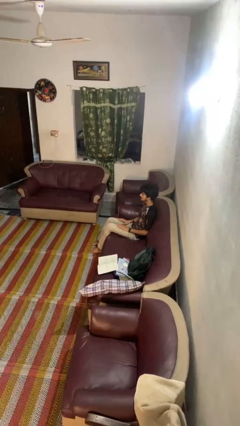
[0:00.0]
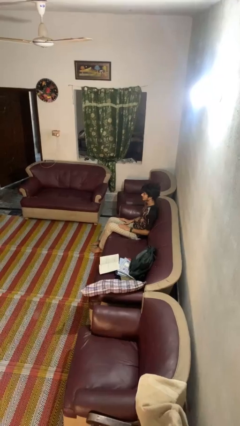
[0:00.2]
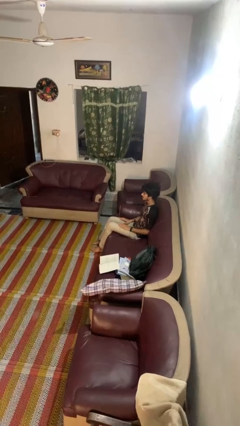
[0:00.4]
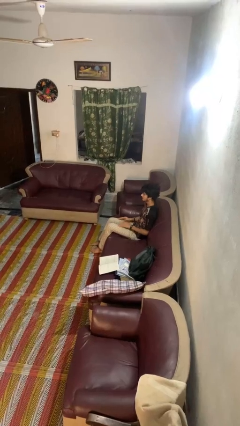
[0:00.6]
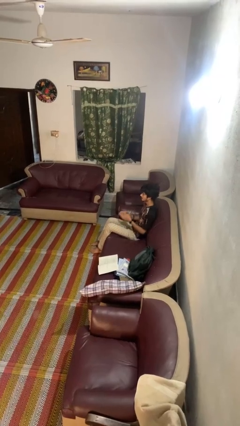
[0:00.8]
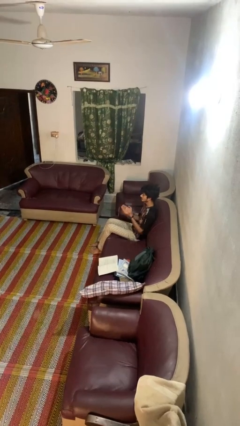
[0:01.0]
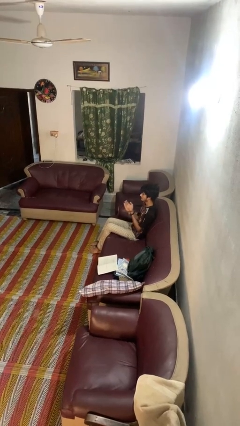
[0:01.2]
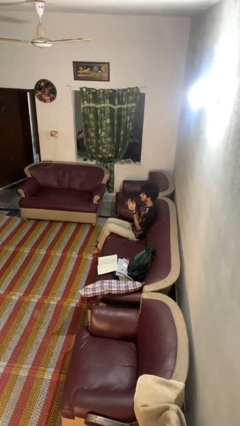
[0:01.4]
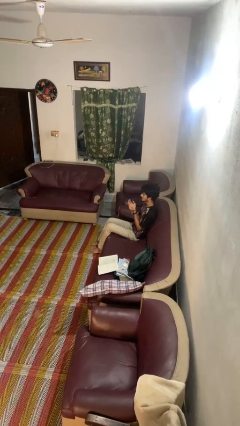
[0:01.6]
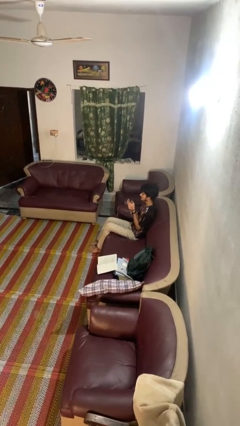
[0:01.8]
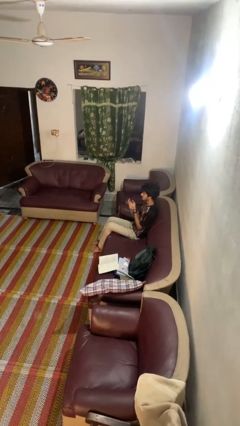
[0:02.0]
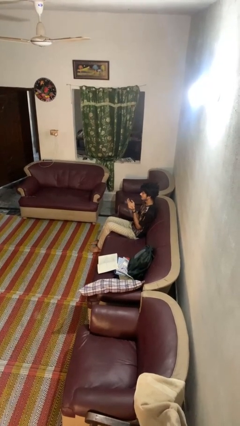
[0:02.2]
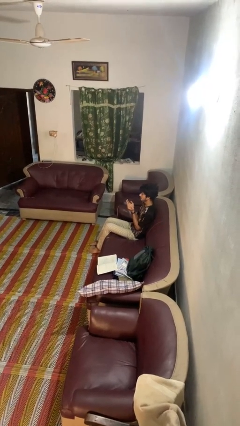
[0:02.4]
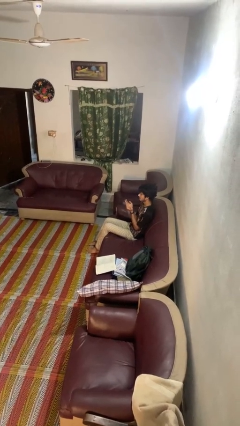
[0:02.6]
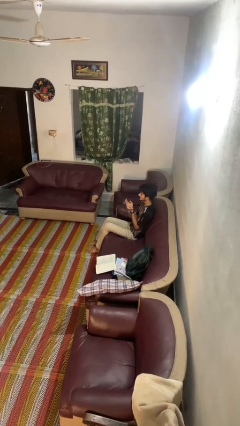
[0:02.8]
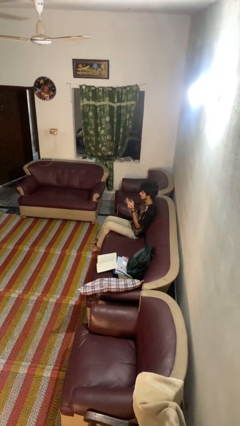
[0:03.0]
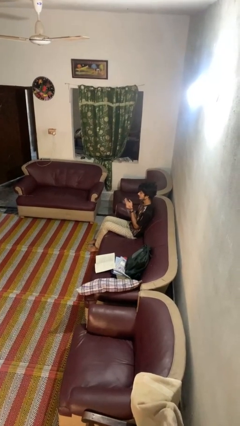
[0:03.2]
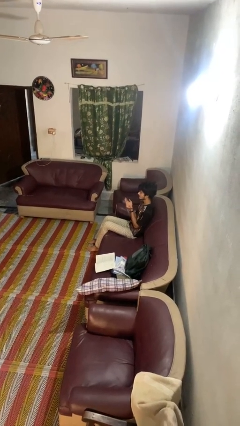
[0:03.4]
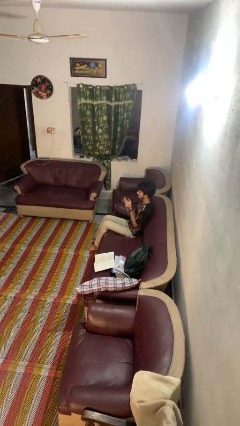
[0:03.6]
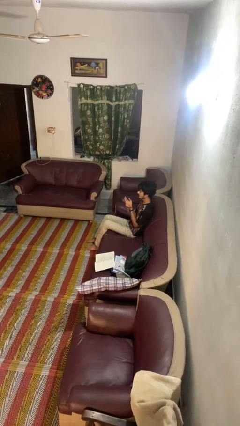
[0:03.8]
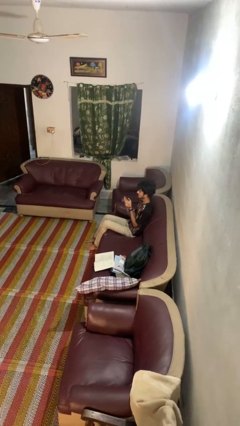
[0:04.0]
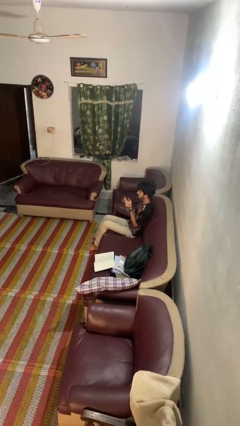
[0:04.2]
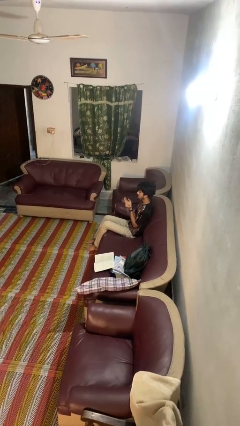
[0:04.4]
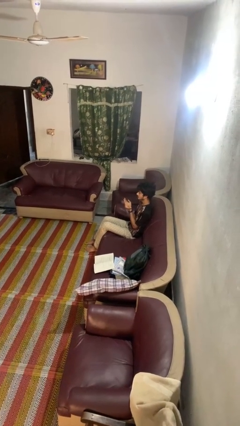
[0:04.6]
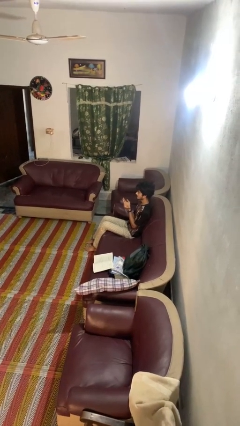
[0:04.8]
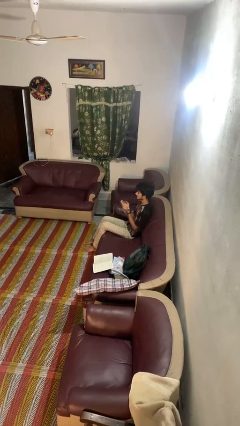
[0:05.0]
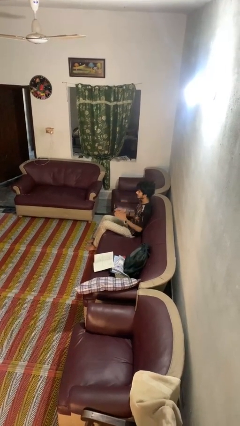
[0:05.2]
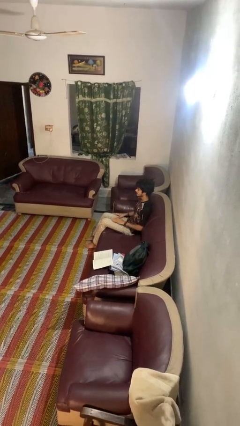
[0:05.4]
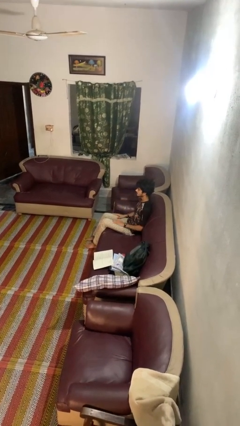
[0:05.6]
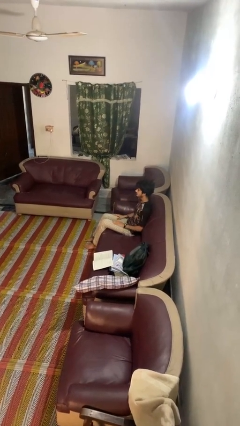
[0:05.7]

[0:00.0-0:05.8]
person prays

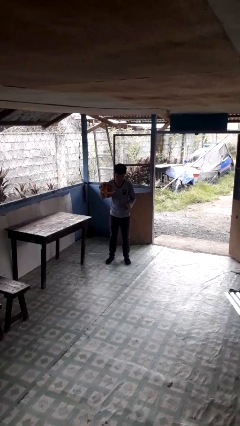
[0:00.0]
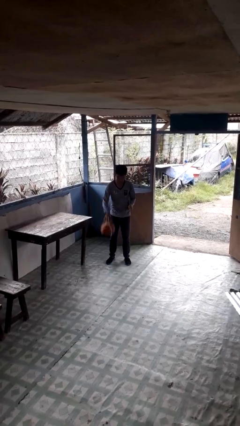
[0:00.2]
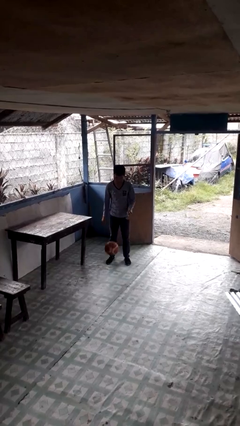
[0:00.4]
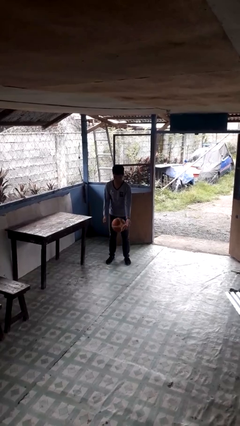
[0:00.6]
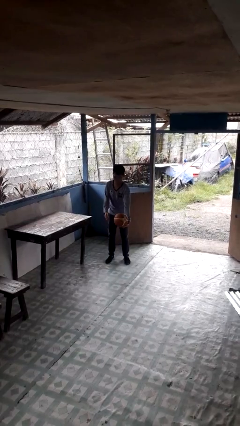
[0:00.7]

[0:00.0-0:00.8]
person bounces ball on floor

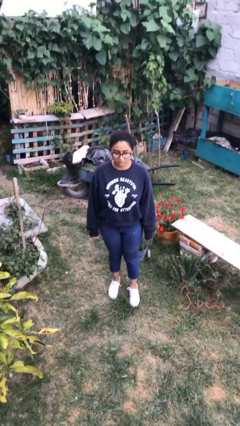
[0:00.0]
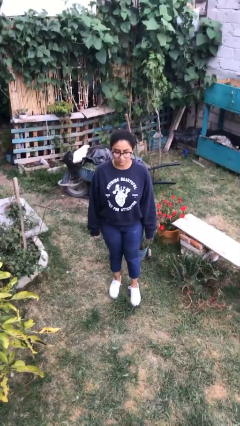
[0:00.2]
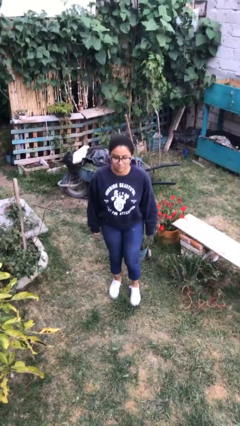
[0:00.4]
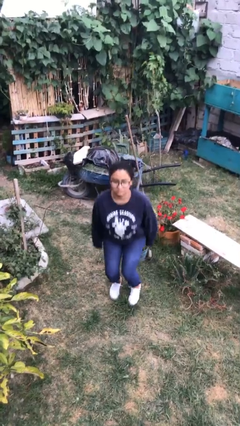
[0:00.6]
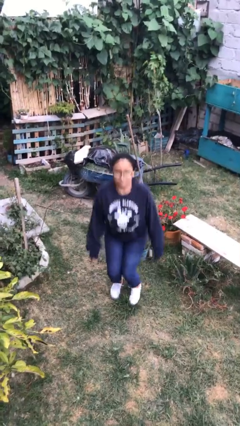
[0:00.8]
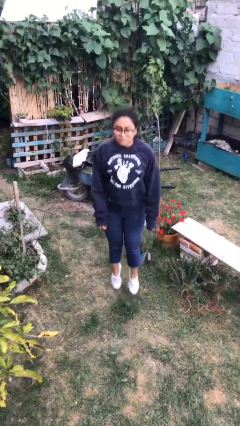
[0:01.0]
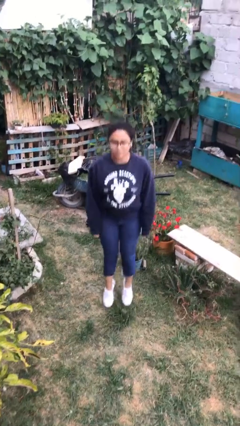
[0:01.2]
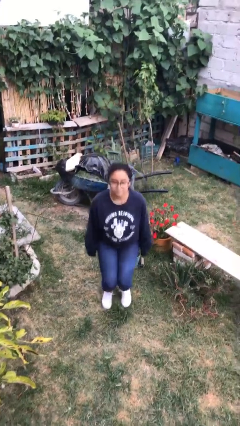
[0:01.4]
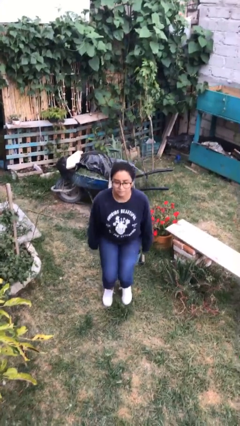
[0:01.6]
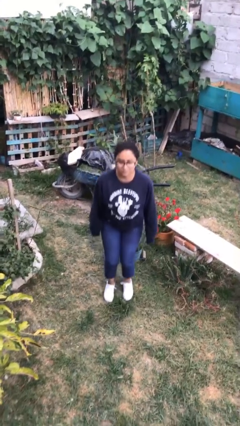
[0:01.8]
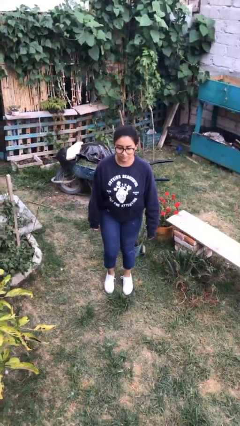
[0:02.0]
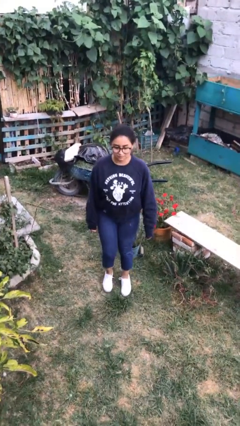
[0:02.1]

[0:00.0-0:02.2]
person jumps

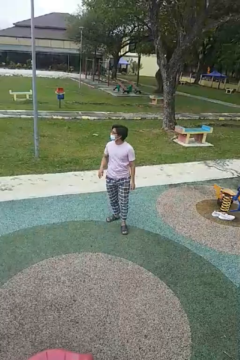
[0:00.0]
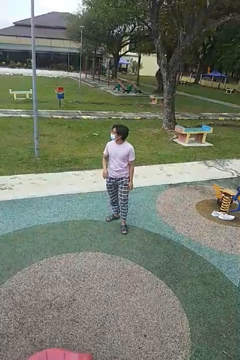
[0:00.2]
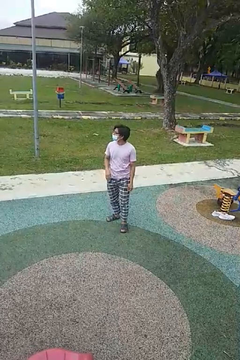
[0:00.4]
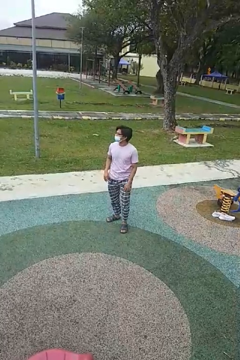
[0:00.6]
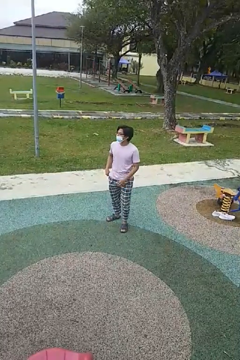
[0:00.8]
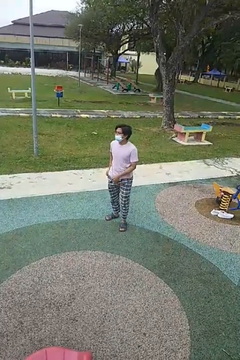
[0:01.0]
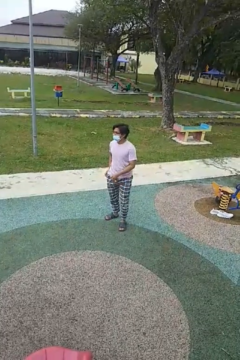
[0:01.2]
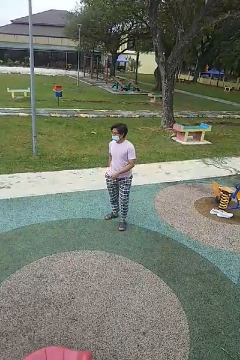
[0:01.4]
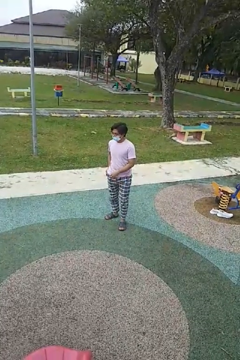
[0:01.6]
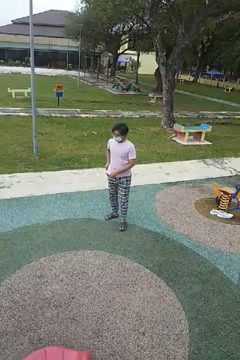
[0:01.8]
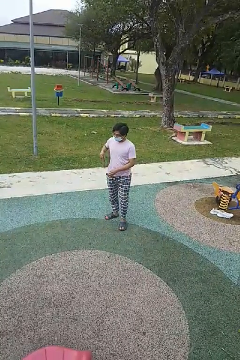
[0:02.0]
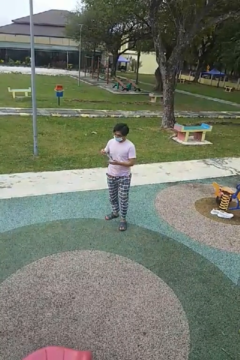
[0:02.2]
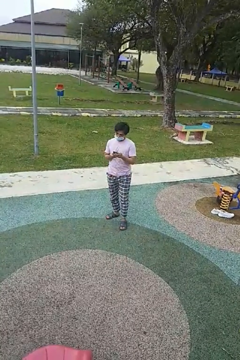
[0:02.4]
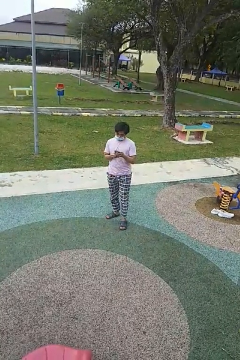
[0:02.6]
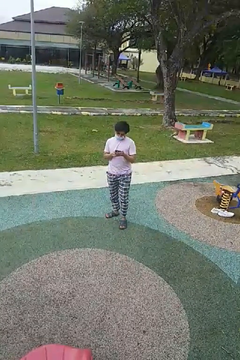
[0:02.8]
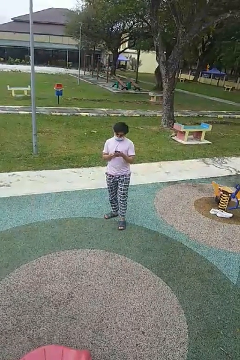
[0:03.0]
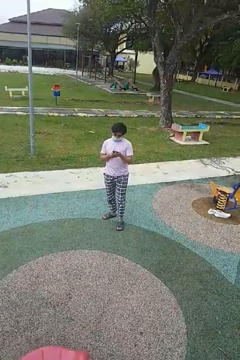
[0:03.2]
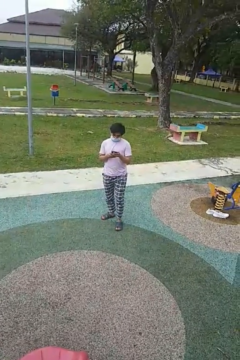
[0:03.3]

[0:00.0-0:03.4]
person takes phone from pocket

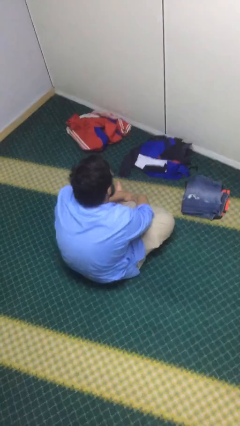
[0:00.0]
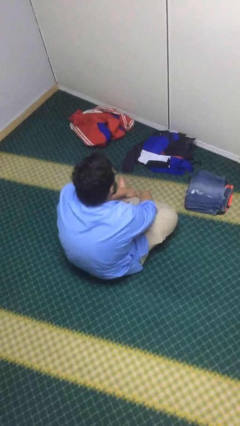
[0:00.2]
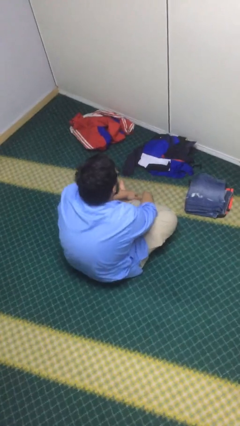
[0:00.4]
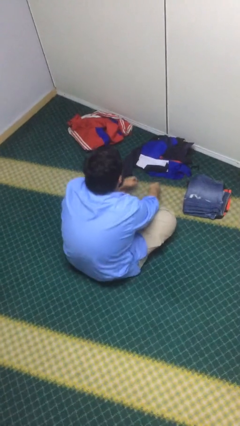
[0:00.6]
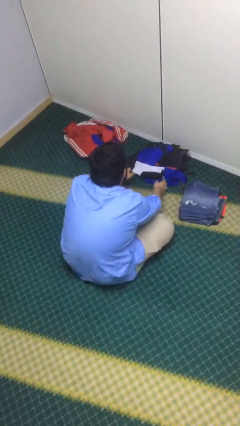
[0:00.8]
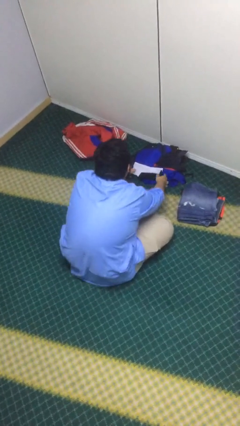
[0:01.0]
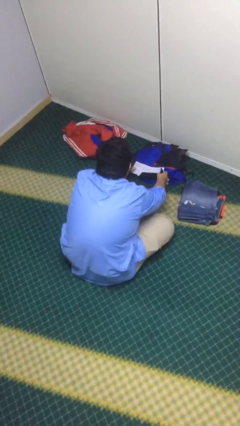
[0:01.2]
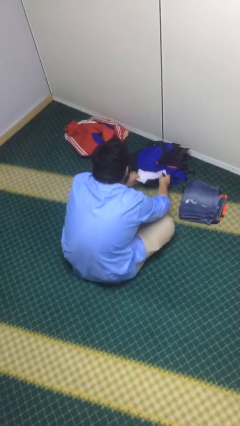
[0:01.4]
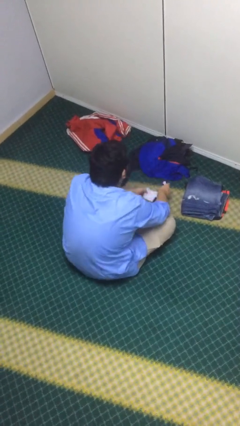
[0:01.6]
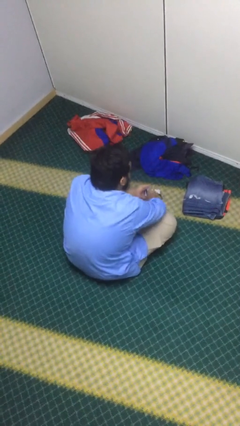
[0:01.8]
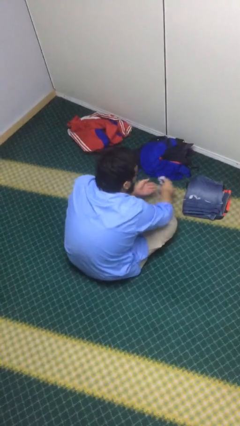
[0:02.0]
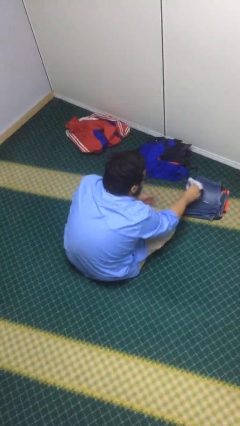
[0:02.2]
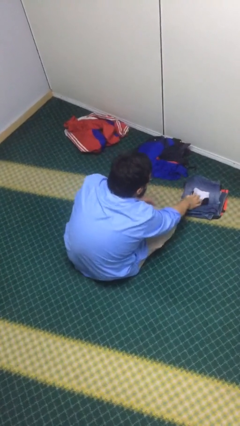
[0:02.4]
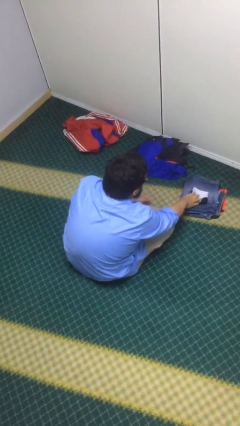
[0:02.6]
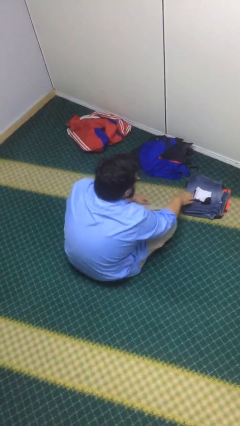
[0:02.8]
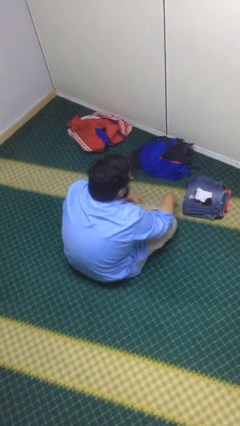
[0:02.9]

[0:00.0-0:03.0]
person folds socks

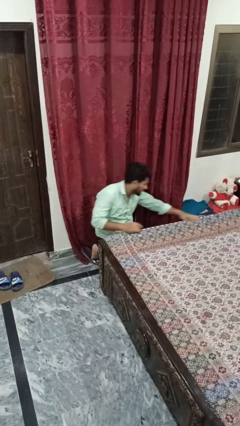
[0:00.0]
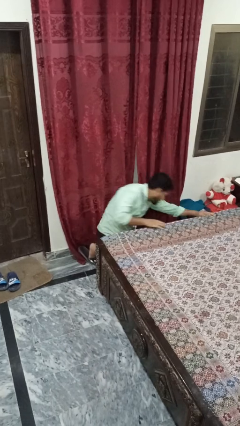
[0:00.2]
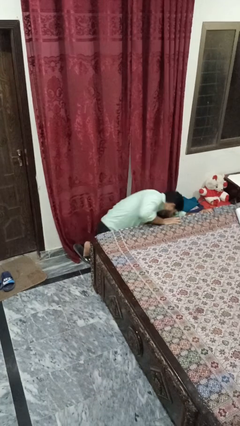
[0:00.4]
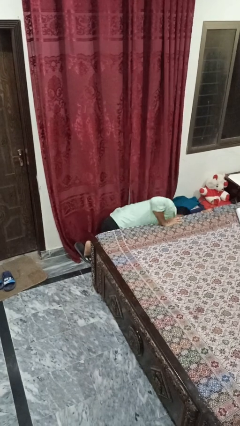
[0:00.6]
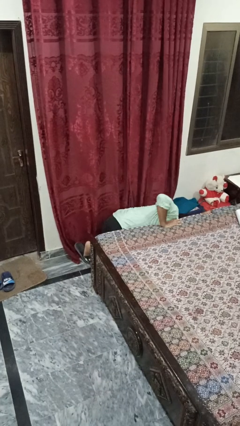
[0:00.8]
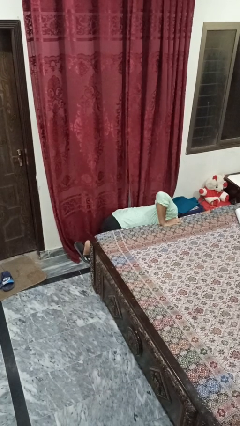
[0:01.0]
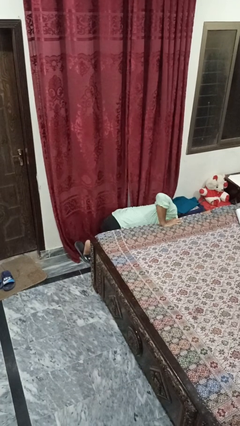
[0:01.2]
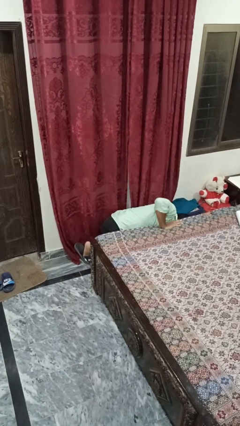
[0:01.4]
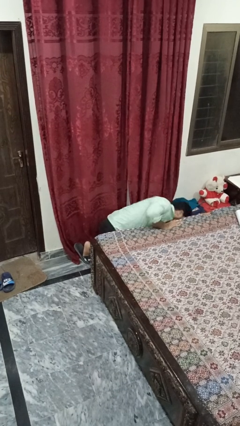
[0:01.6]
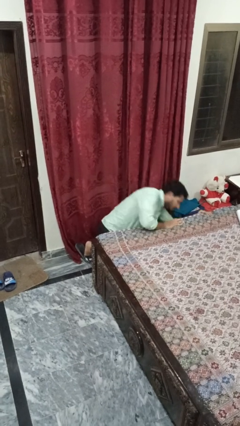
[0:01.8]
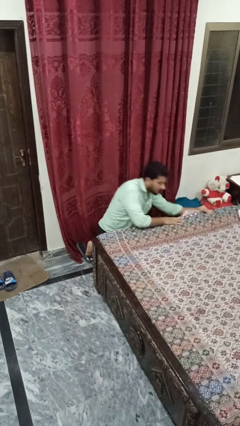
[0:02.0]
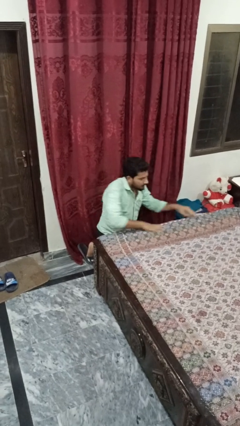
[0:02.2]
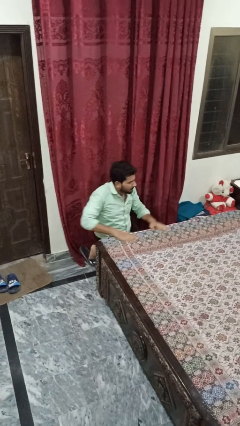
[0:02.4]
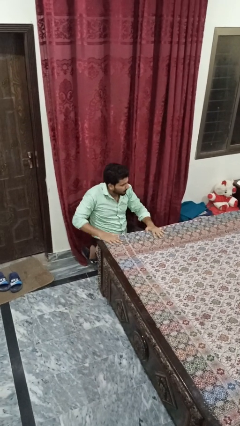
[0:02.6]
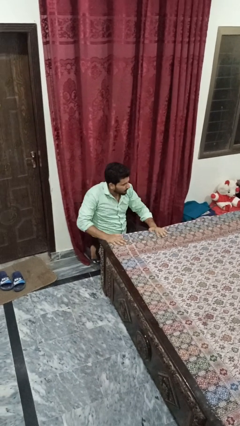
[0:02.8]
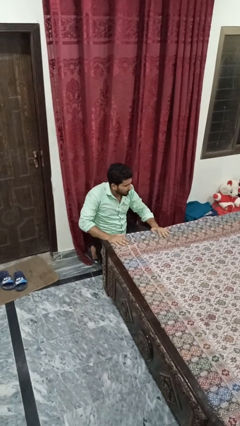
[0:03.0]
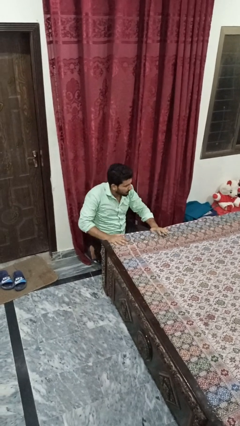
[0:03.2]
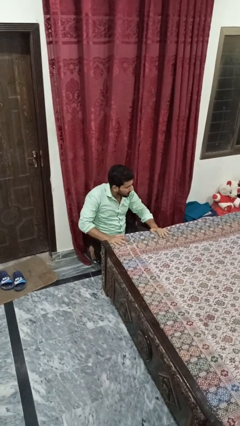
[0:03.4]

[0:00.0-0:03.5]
person searches under bed
